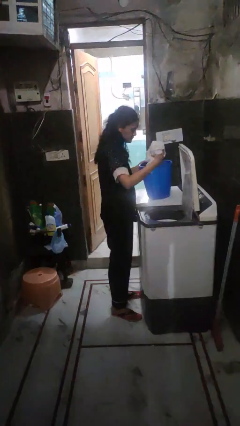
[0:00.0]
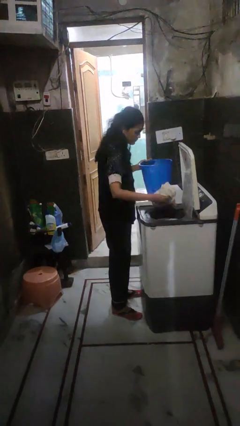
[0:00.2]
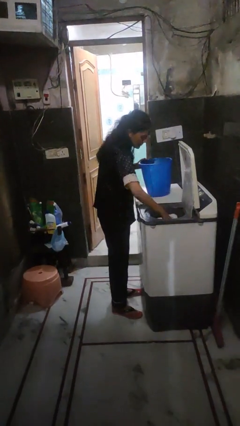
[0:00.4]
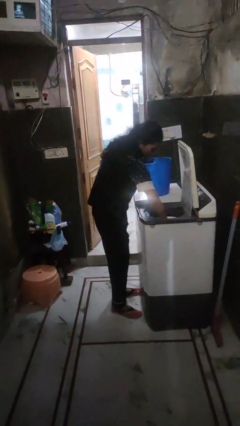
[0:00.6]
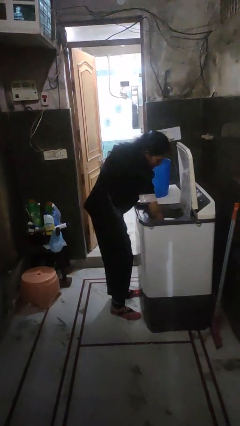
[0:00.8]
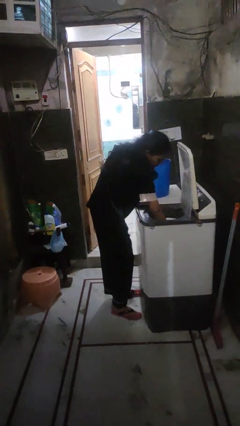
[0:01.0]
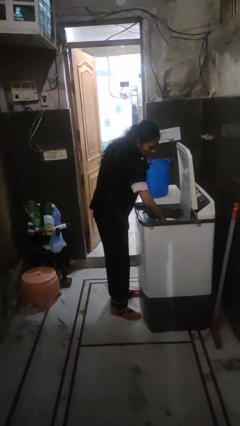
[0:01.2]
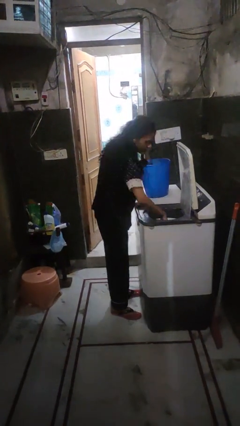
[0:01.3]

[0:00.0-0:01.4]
person loads dryer

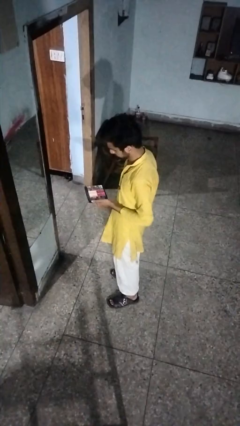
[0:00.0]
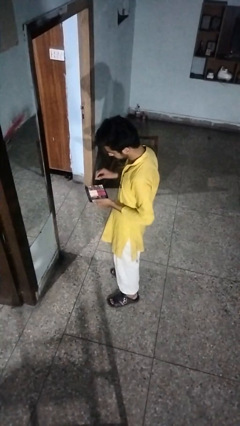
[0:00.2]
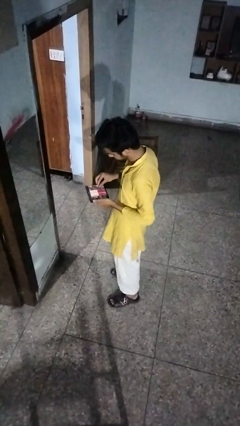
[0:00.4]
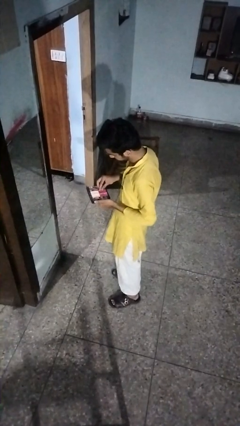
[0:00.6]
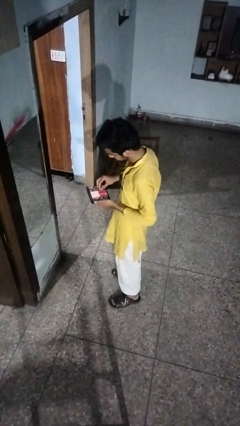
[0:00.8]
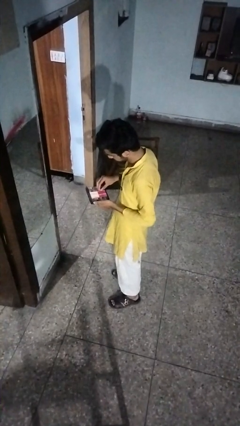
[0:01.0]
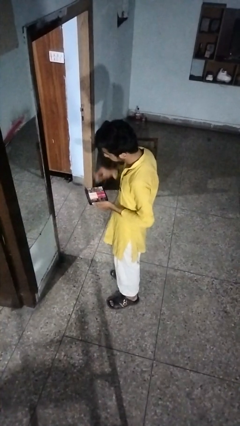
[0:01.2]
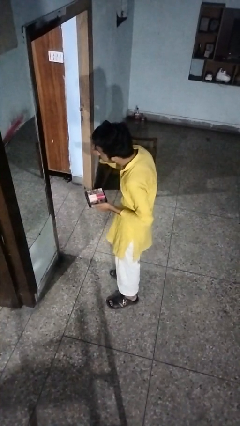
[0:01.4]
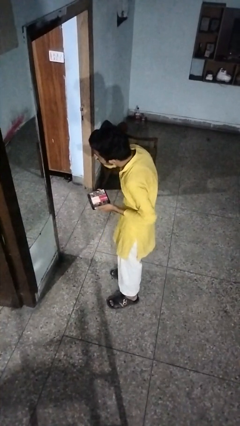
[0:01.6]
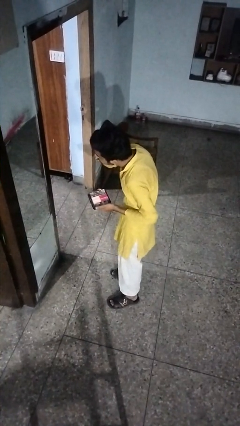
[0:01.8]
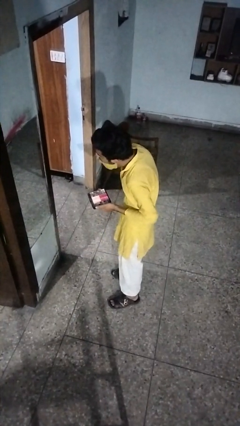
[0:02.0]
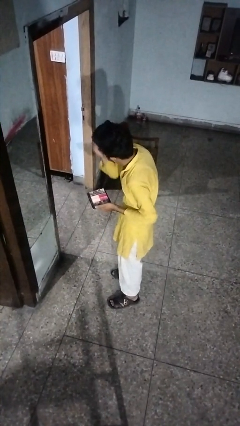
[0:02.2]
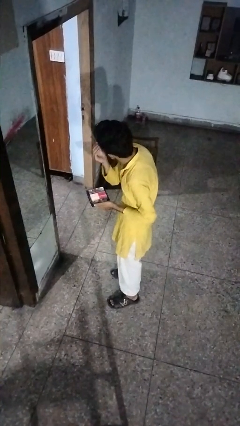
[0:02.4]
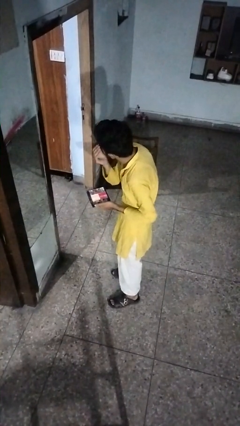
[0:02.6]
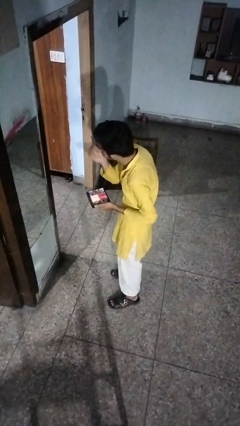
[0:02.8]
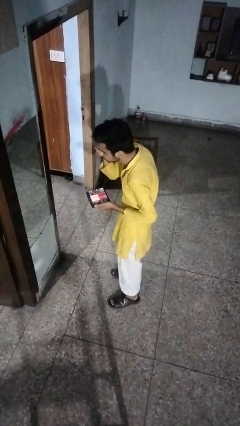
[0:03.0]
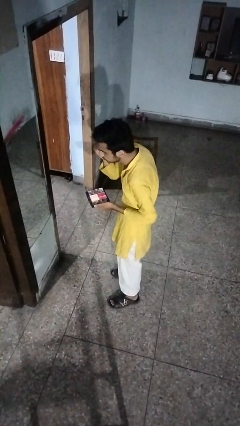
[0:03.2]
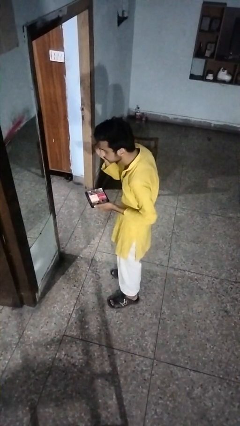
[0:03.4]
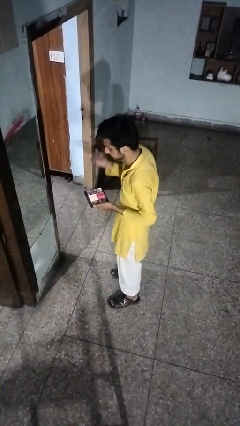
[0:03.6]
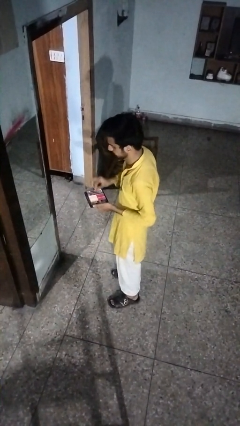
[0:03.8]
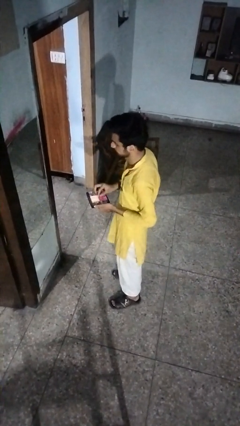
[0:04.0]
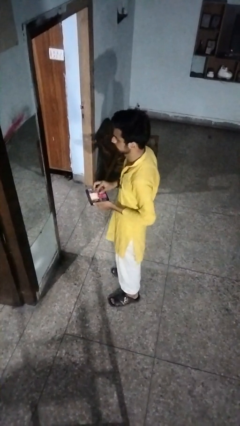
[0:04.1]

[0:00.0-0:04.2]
person applies eye makeup

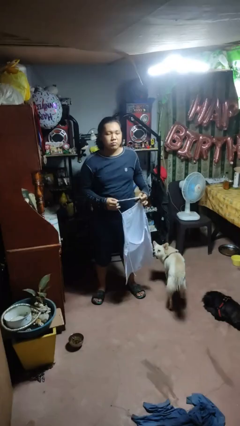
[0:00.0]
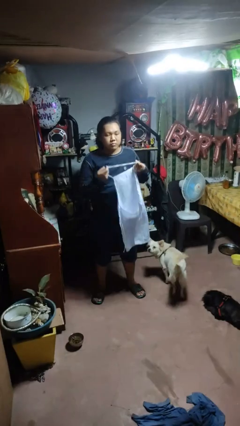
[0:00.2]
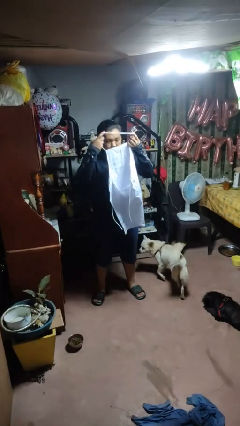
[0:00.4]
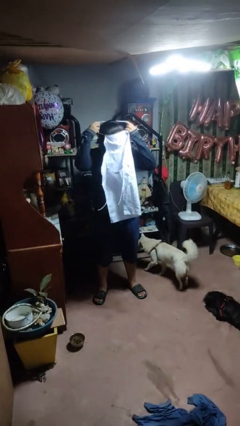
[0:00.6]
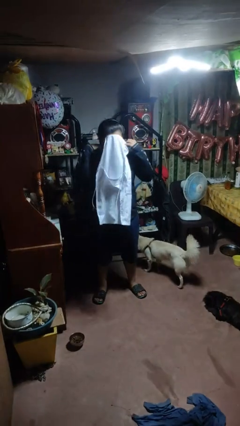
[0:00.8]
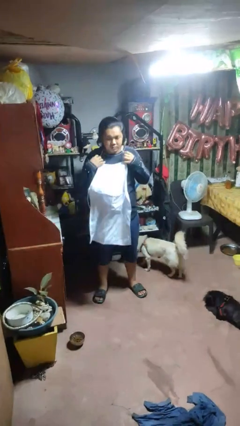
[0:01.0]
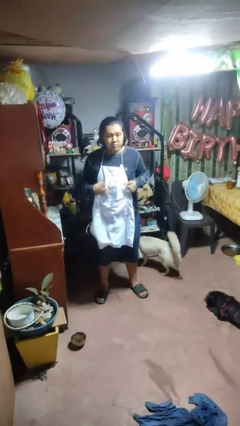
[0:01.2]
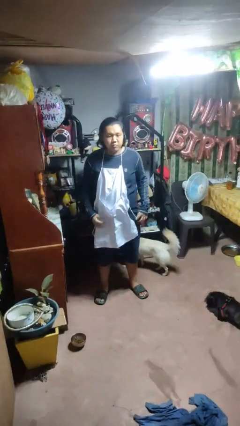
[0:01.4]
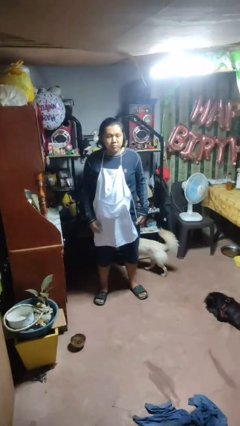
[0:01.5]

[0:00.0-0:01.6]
person puts on apron

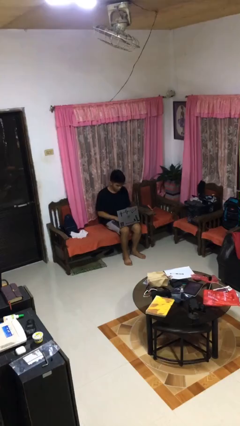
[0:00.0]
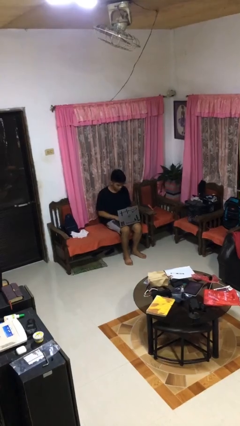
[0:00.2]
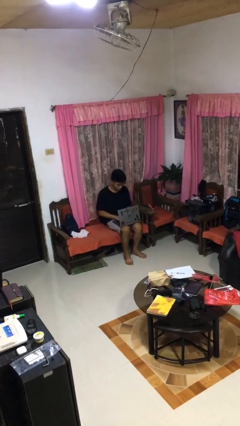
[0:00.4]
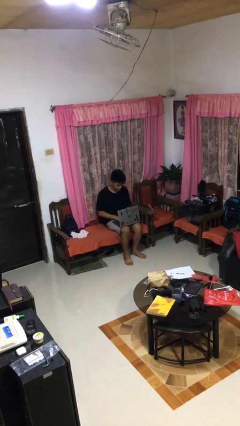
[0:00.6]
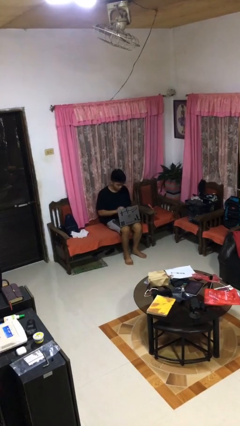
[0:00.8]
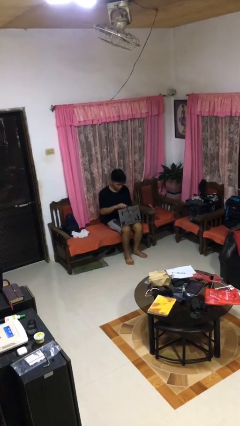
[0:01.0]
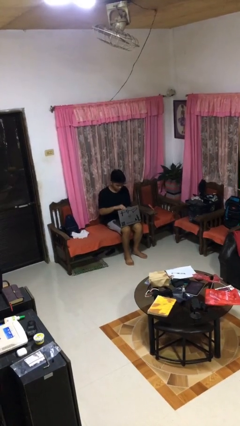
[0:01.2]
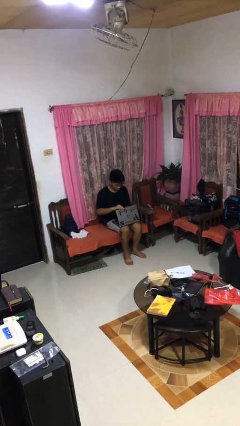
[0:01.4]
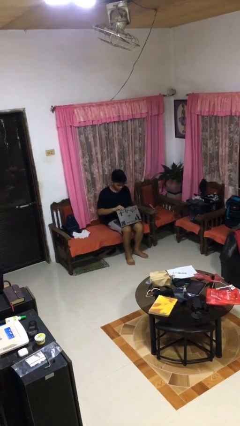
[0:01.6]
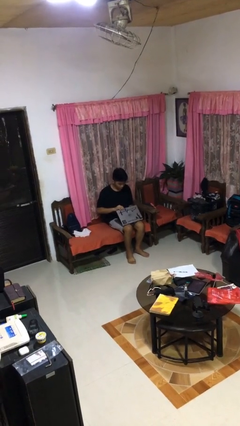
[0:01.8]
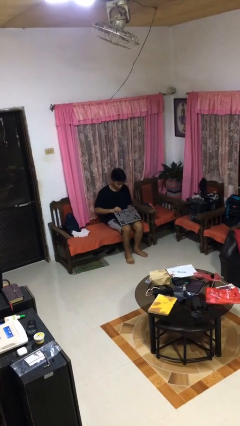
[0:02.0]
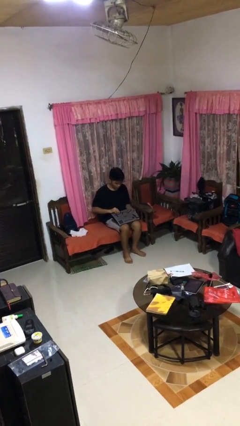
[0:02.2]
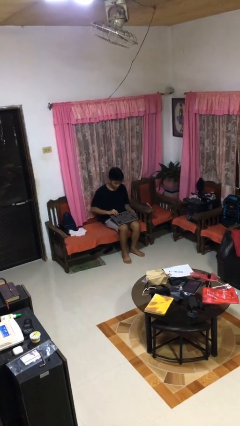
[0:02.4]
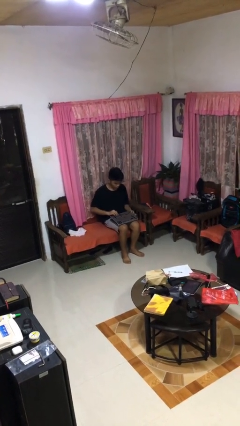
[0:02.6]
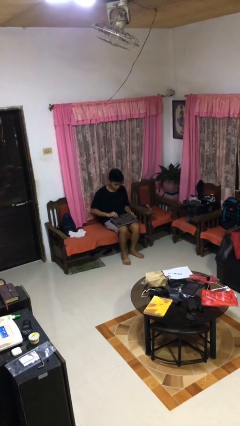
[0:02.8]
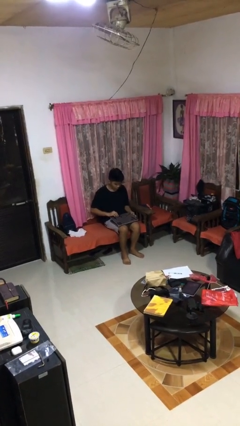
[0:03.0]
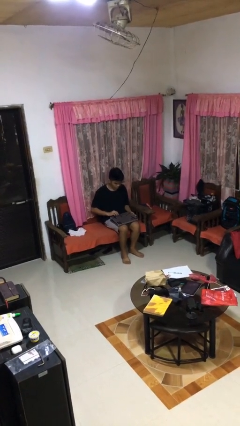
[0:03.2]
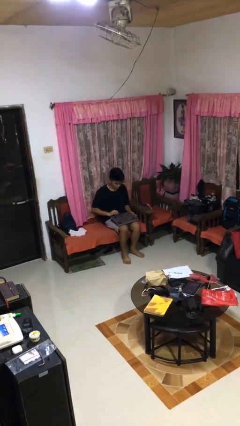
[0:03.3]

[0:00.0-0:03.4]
person closes laptop

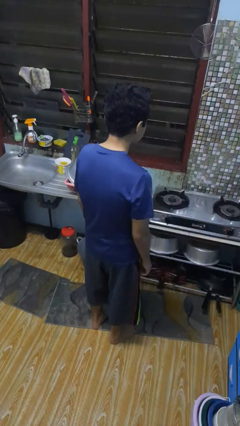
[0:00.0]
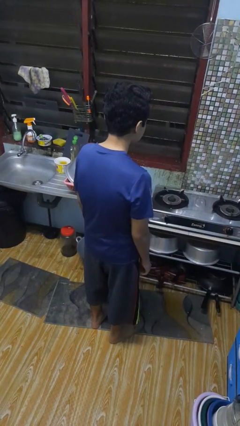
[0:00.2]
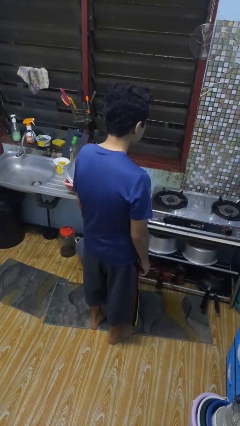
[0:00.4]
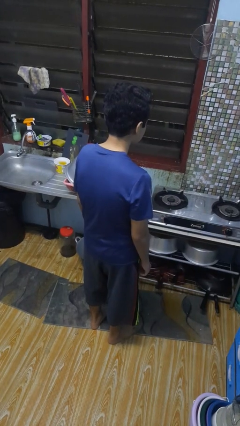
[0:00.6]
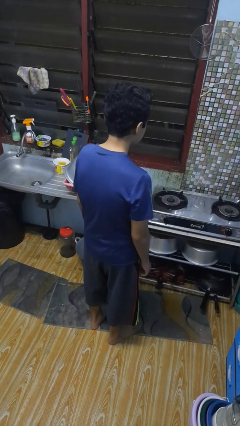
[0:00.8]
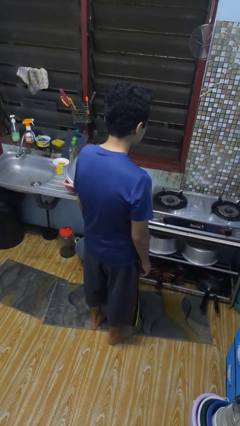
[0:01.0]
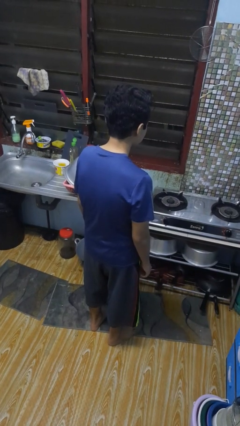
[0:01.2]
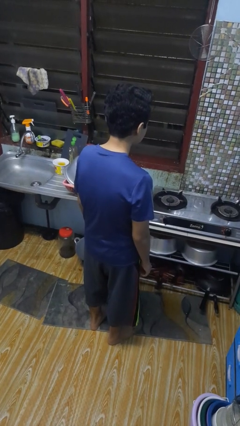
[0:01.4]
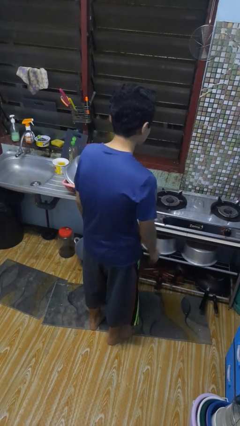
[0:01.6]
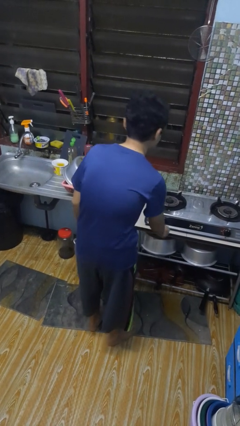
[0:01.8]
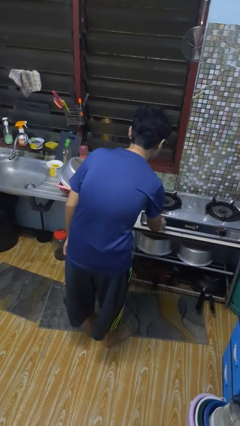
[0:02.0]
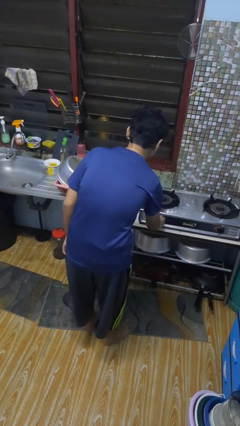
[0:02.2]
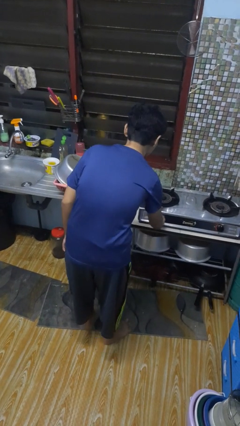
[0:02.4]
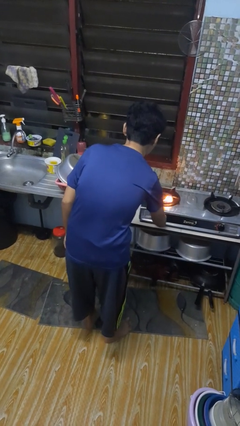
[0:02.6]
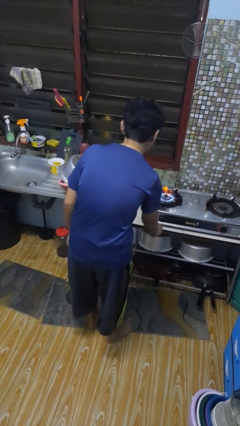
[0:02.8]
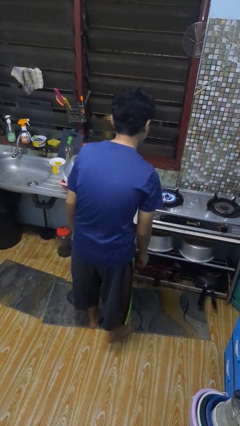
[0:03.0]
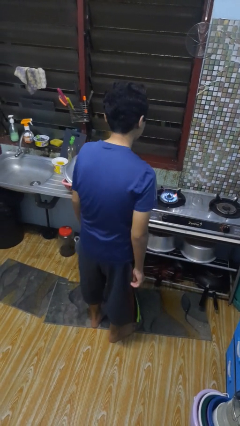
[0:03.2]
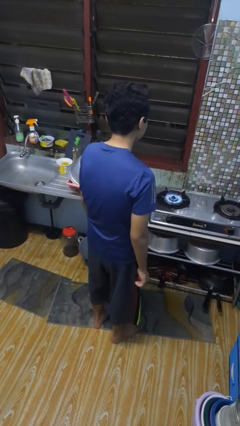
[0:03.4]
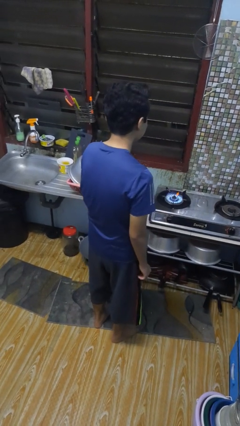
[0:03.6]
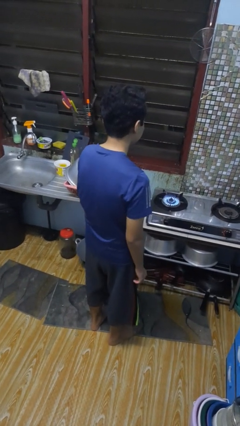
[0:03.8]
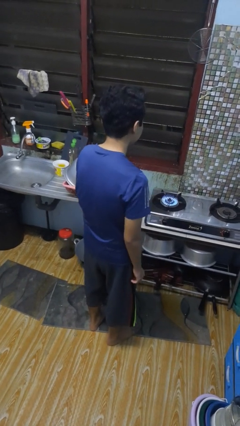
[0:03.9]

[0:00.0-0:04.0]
person turns on stovetop

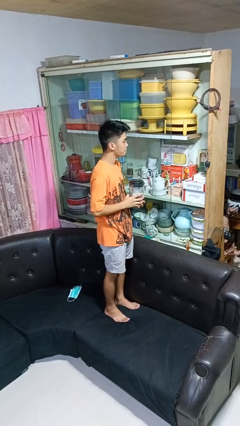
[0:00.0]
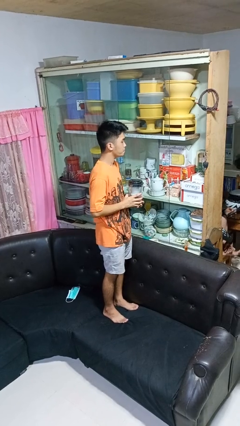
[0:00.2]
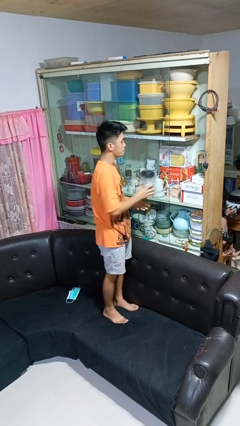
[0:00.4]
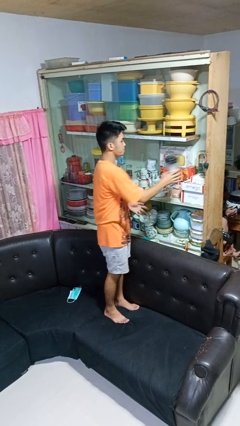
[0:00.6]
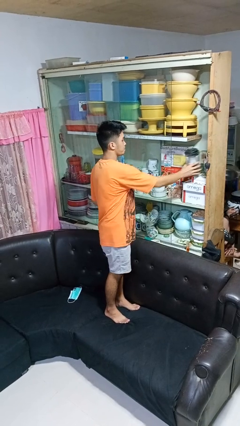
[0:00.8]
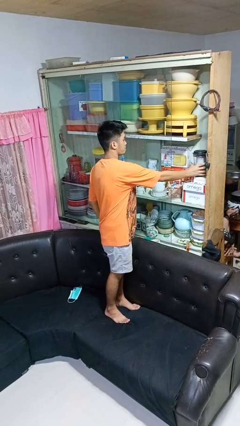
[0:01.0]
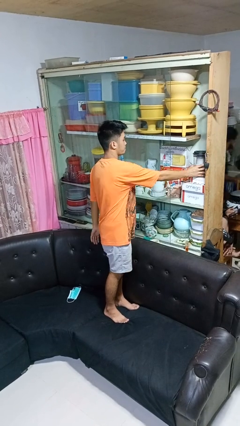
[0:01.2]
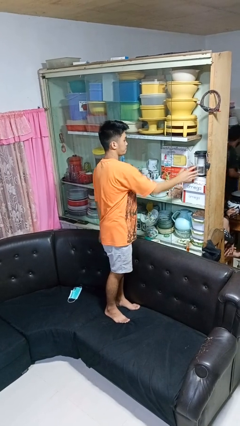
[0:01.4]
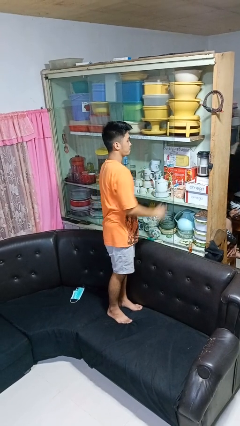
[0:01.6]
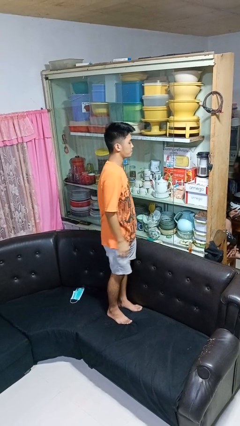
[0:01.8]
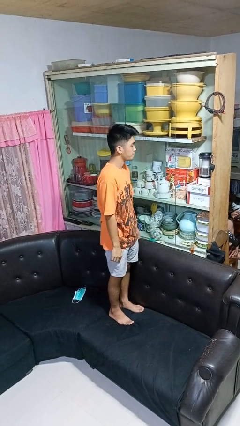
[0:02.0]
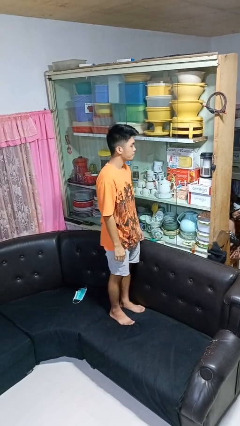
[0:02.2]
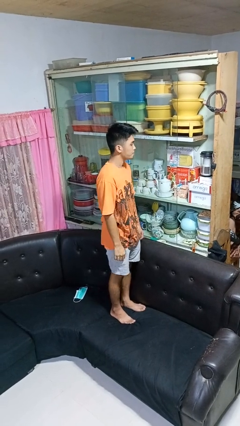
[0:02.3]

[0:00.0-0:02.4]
person puts down object into cabinet

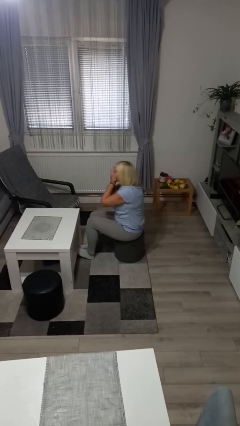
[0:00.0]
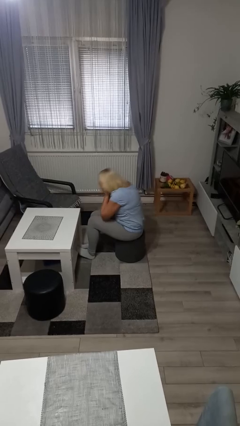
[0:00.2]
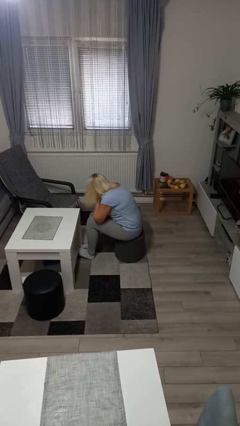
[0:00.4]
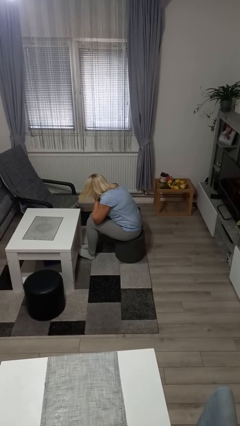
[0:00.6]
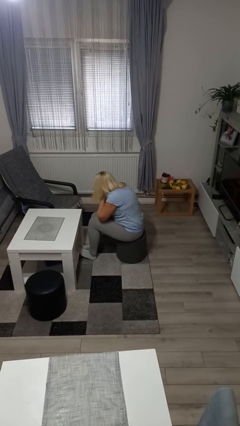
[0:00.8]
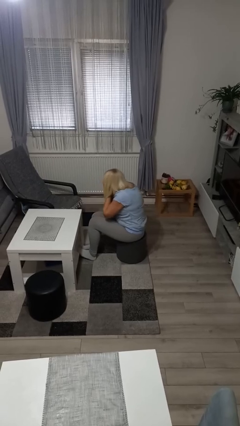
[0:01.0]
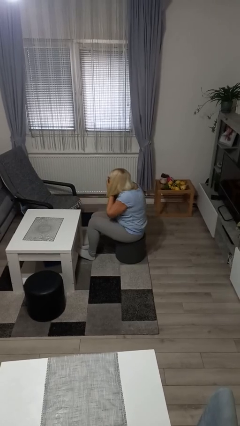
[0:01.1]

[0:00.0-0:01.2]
person sneezes into hand
